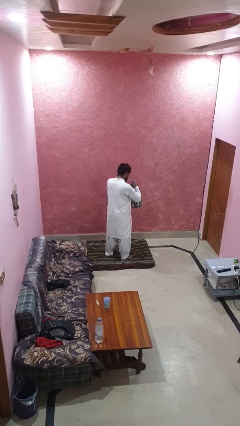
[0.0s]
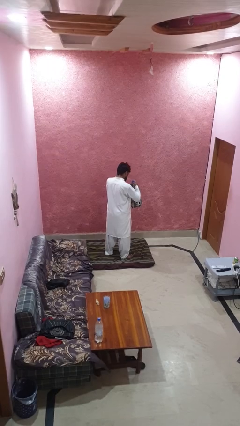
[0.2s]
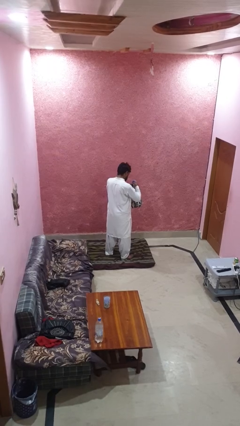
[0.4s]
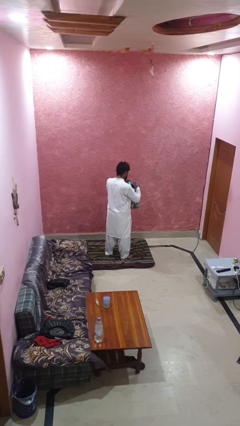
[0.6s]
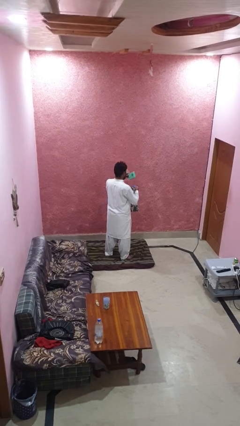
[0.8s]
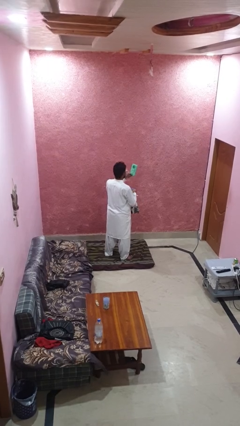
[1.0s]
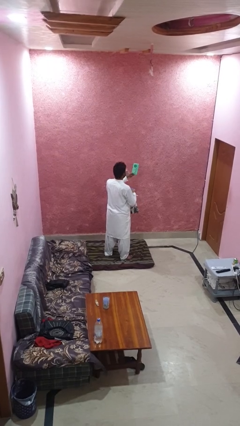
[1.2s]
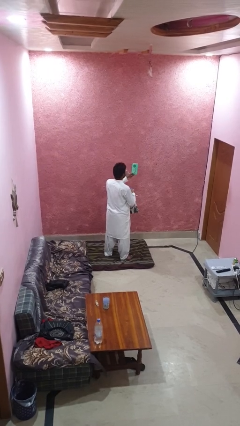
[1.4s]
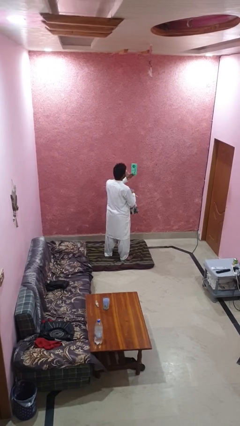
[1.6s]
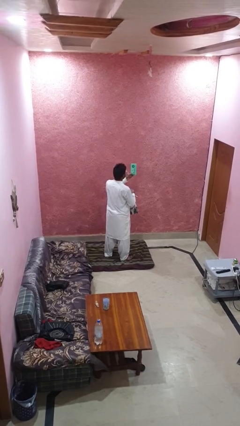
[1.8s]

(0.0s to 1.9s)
person takes object from backpack

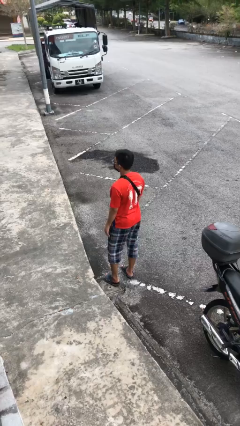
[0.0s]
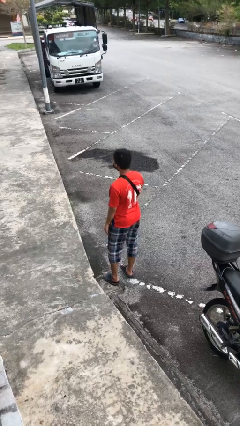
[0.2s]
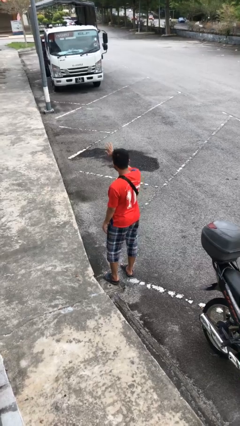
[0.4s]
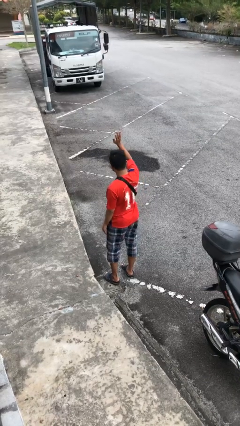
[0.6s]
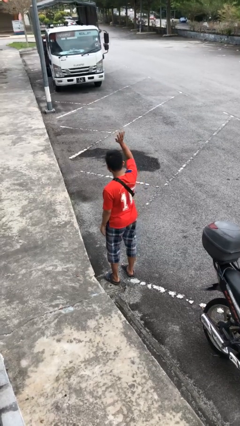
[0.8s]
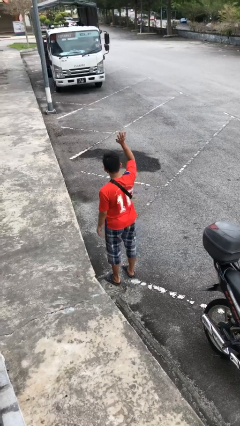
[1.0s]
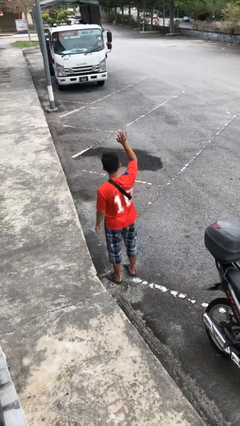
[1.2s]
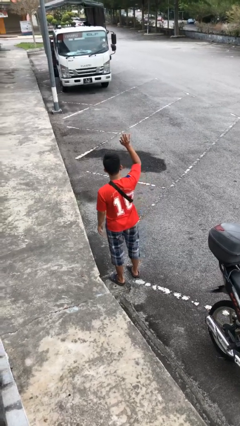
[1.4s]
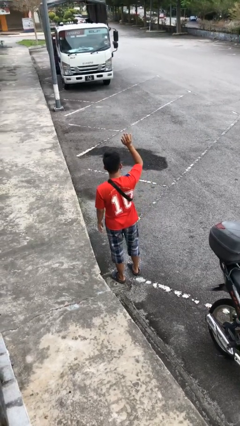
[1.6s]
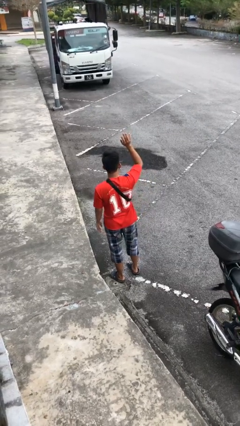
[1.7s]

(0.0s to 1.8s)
person gestures raise hand

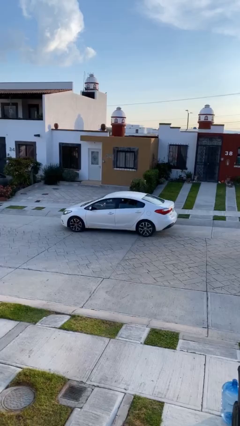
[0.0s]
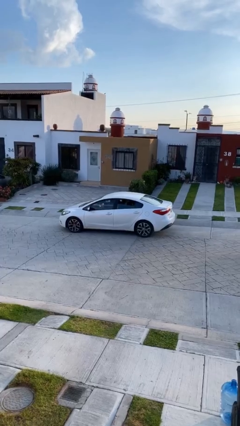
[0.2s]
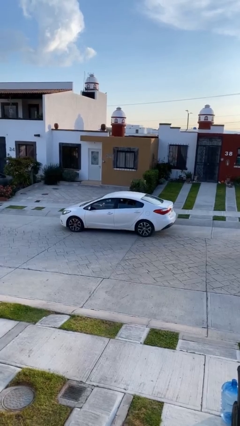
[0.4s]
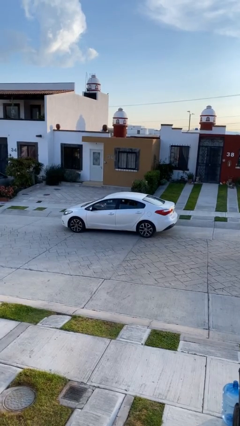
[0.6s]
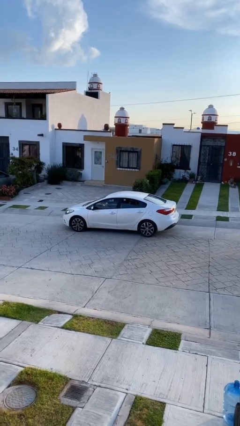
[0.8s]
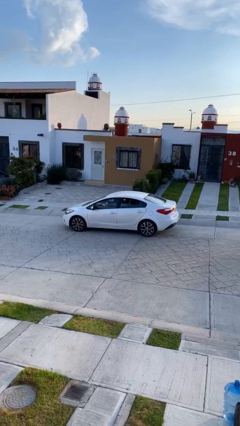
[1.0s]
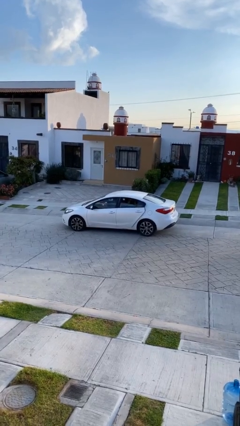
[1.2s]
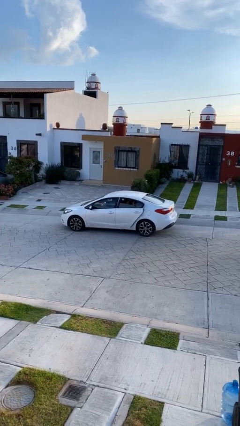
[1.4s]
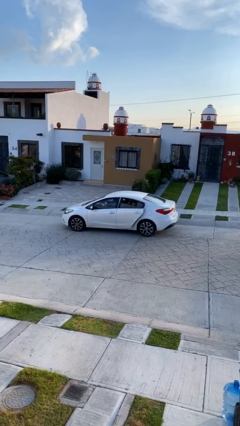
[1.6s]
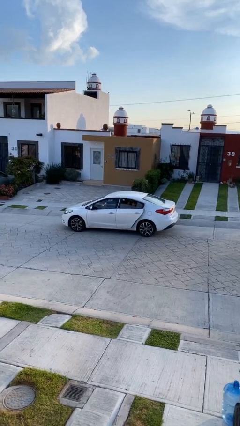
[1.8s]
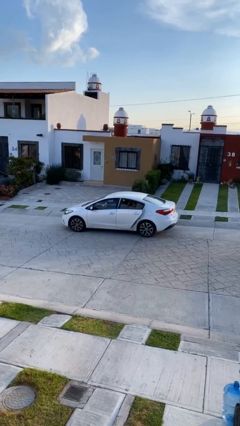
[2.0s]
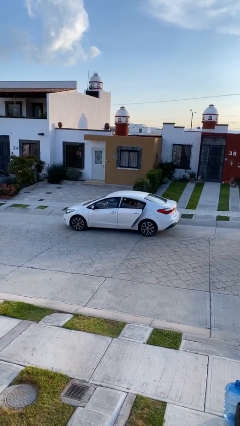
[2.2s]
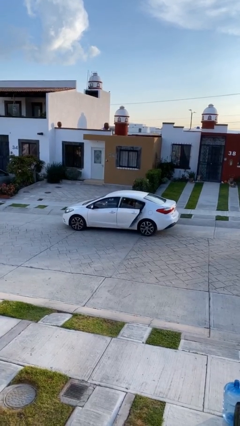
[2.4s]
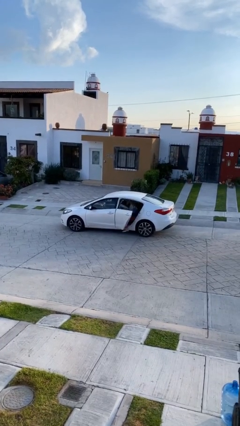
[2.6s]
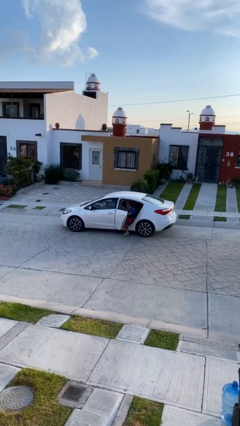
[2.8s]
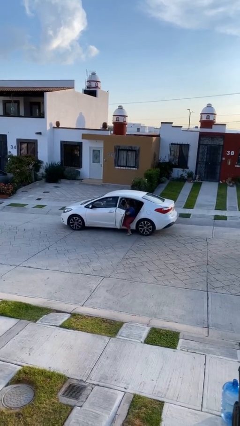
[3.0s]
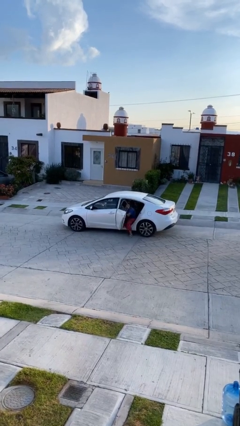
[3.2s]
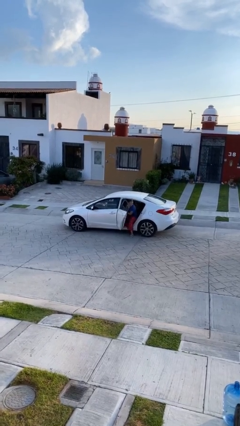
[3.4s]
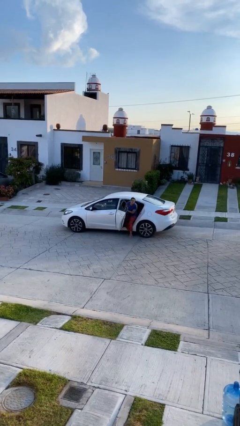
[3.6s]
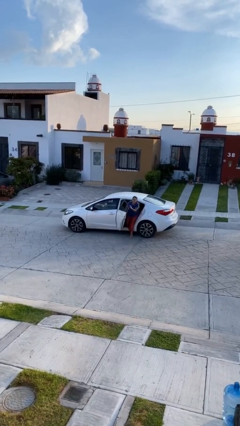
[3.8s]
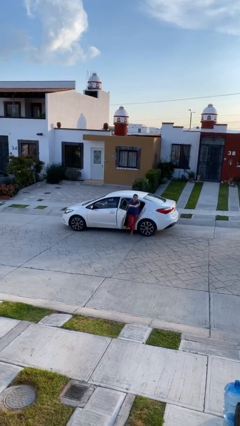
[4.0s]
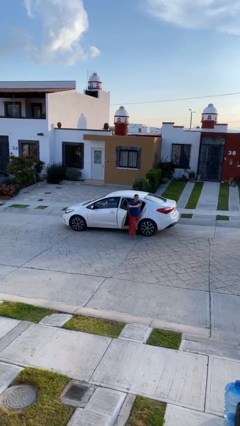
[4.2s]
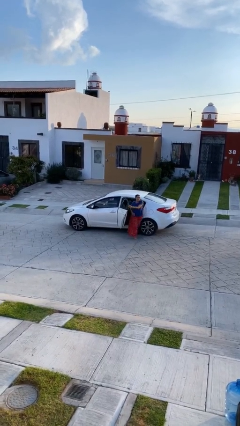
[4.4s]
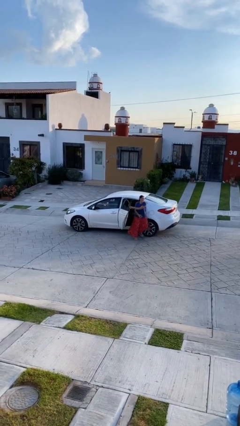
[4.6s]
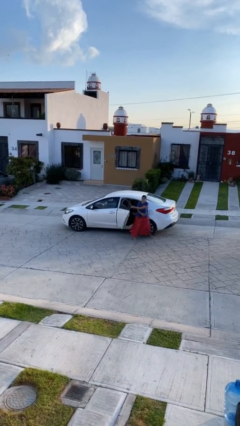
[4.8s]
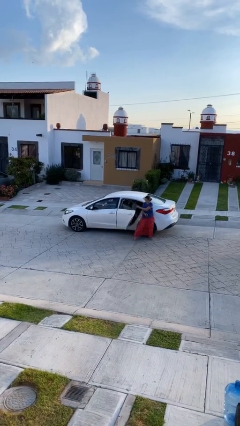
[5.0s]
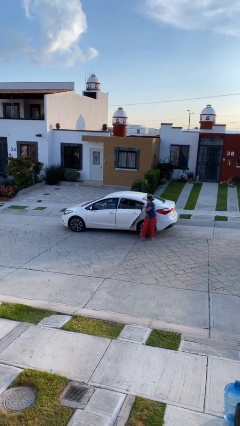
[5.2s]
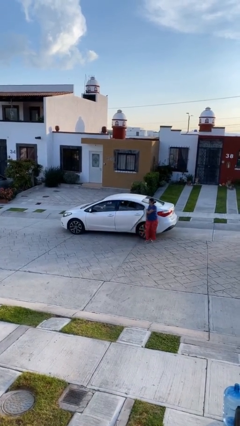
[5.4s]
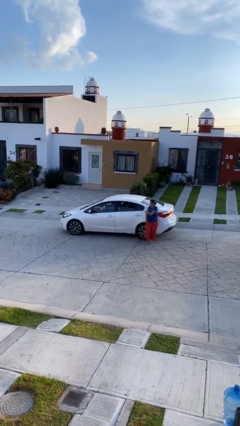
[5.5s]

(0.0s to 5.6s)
car drops off person

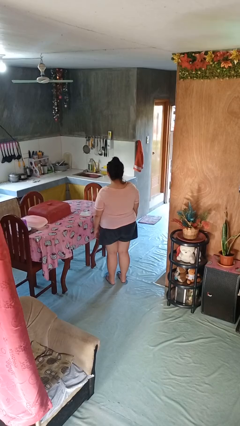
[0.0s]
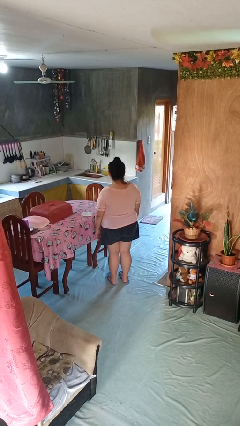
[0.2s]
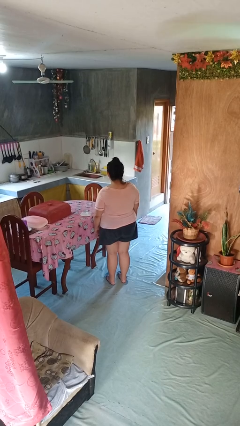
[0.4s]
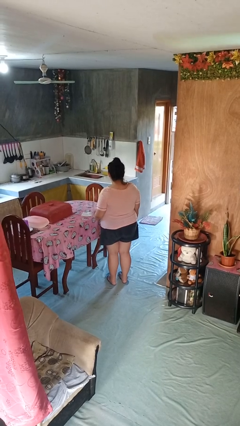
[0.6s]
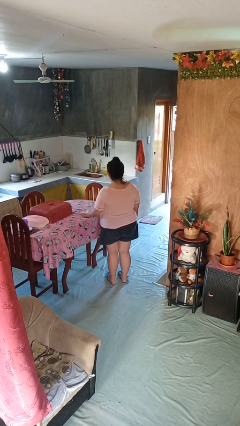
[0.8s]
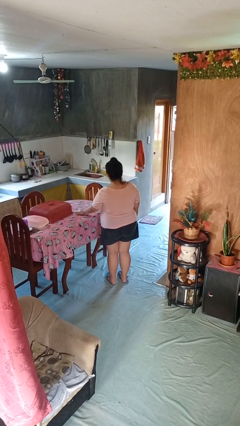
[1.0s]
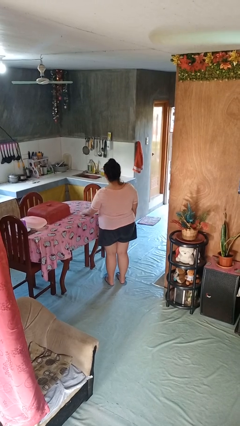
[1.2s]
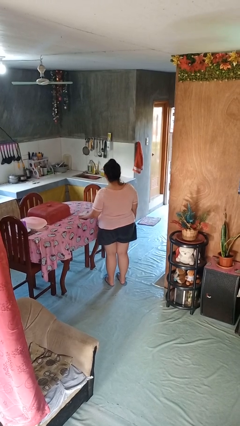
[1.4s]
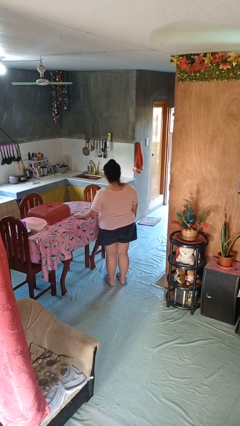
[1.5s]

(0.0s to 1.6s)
person cleans table with rag

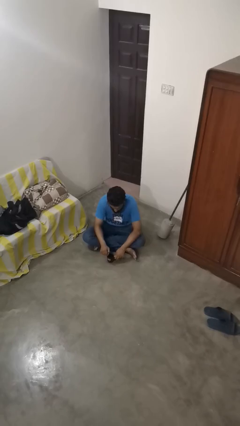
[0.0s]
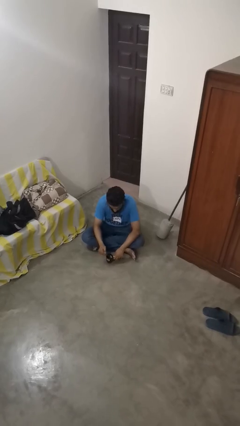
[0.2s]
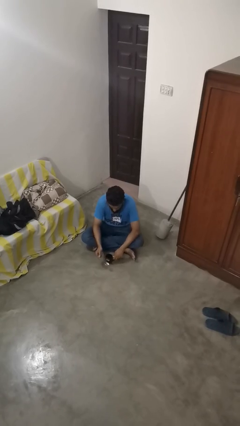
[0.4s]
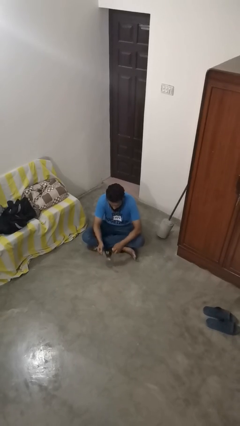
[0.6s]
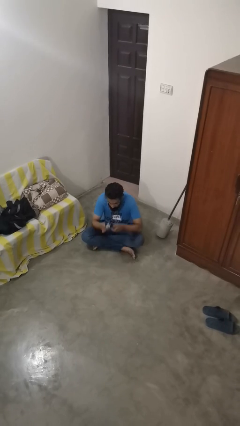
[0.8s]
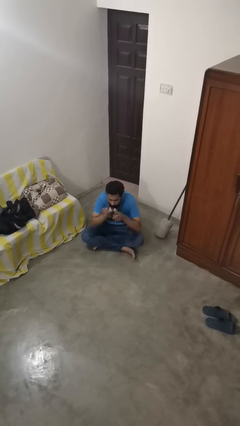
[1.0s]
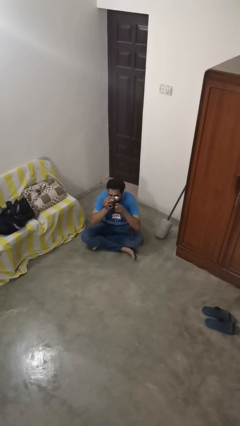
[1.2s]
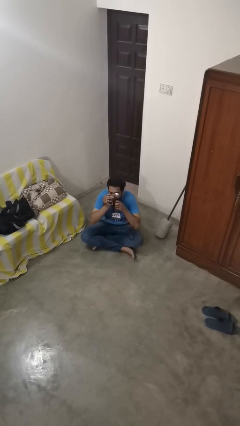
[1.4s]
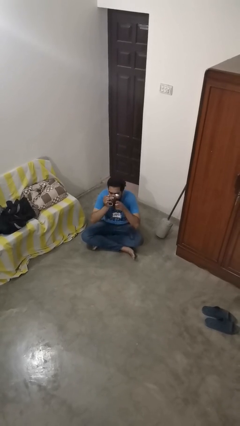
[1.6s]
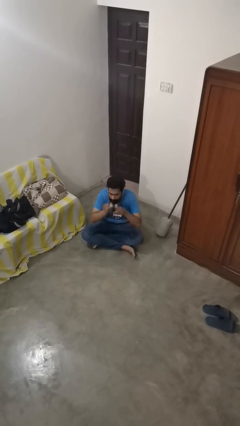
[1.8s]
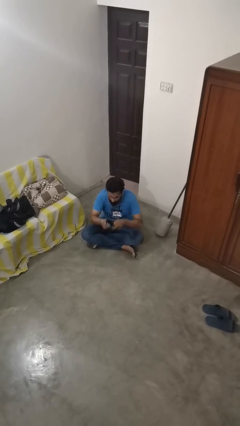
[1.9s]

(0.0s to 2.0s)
person drinks from mug

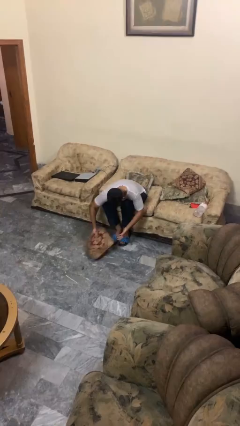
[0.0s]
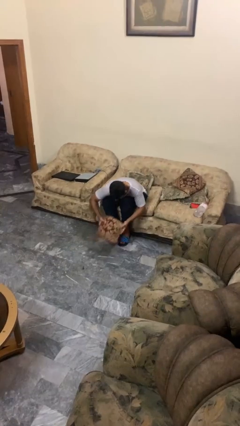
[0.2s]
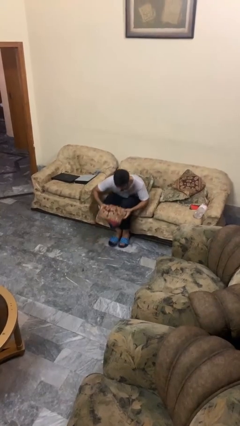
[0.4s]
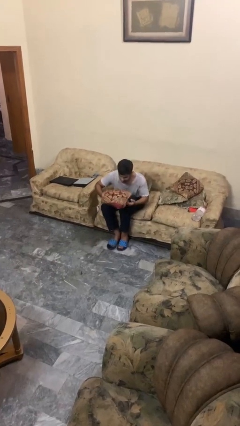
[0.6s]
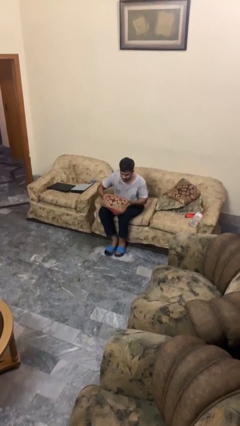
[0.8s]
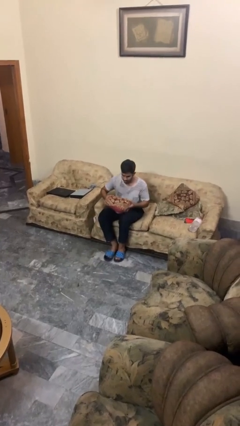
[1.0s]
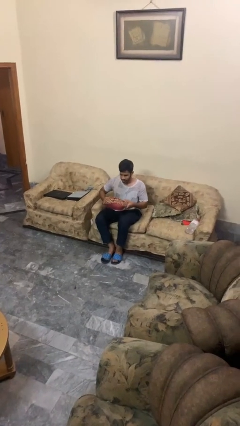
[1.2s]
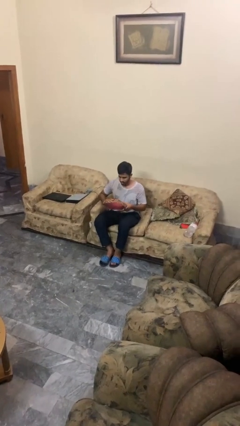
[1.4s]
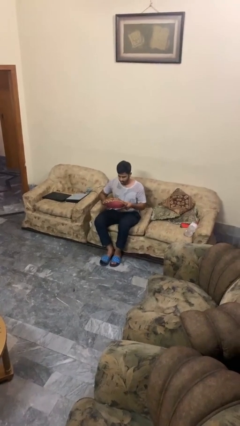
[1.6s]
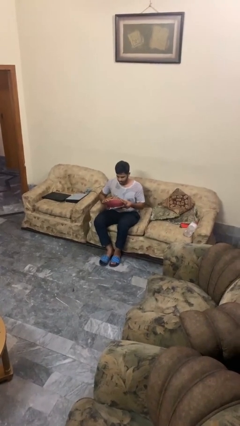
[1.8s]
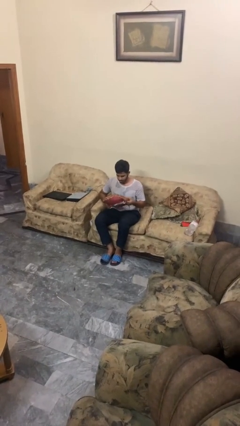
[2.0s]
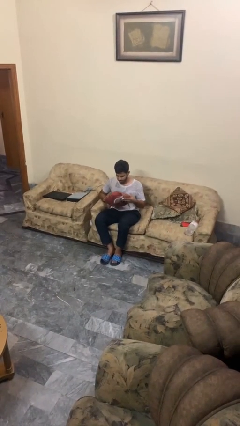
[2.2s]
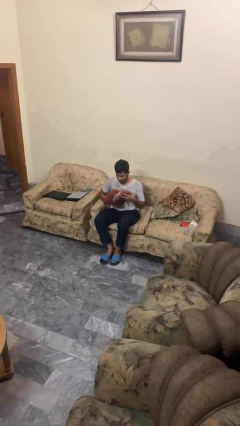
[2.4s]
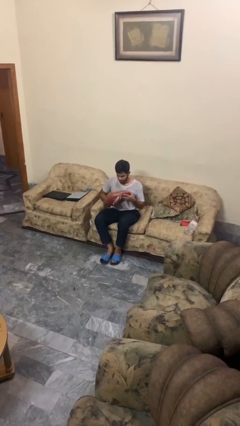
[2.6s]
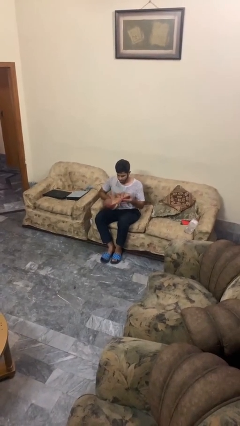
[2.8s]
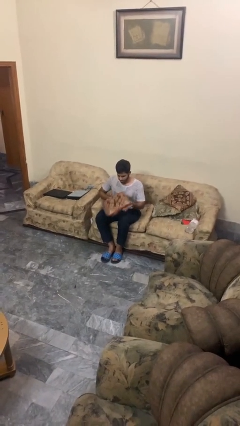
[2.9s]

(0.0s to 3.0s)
person picks up object from floor

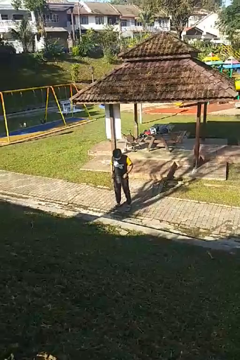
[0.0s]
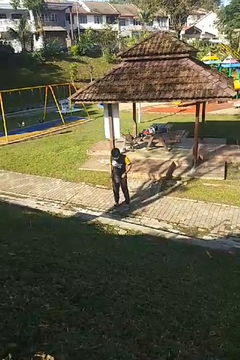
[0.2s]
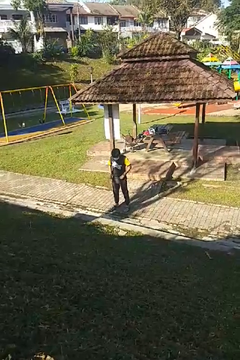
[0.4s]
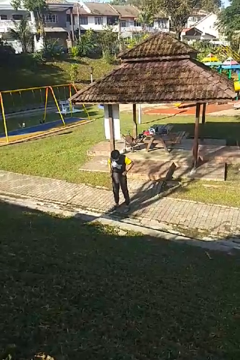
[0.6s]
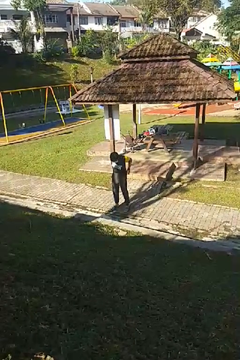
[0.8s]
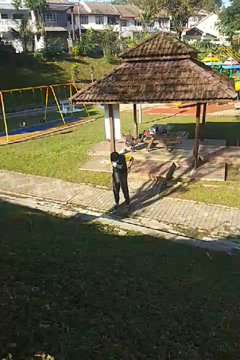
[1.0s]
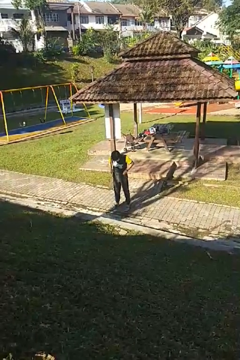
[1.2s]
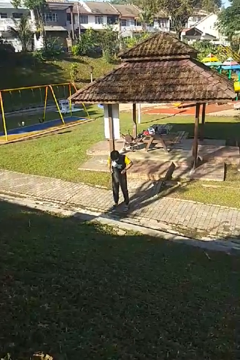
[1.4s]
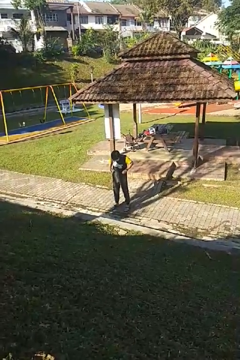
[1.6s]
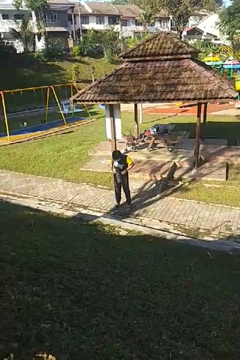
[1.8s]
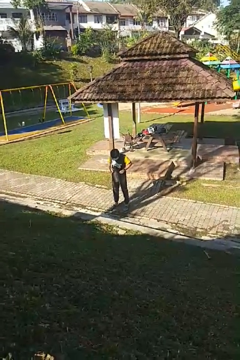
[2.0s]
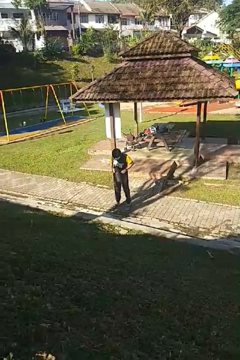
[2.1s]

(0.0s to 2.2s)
person hikes up pants
